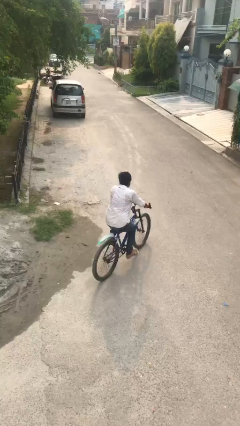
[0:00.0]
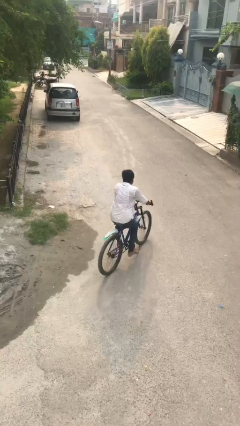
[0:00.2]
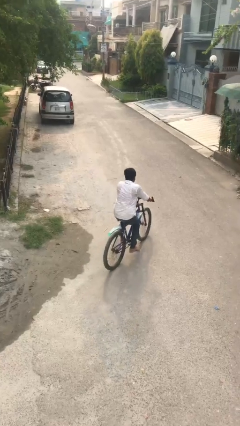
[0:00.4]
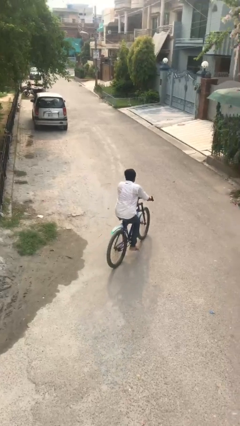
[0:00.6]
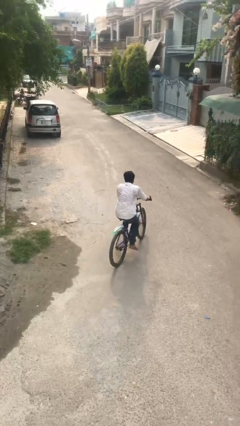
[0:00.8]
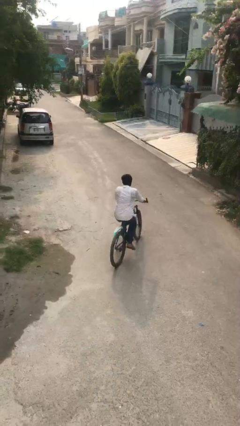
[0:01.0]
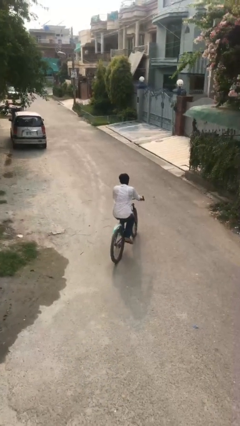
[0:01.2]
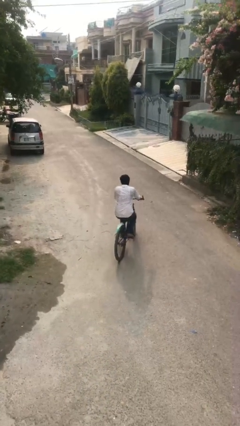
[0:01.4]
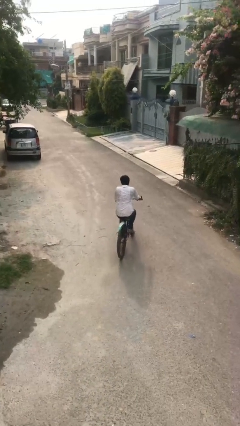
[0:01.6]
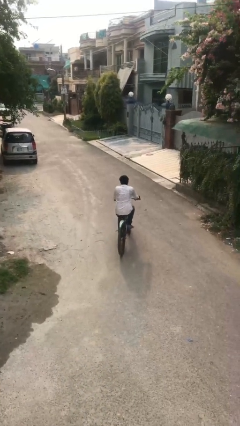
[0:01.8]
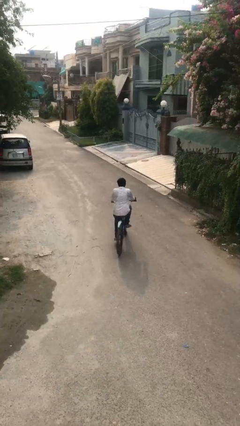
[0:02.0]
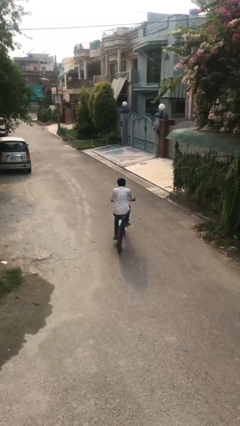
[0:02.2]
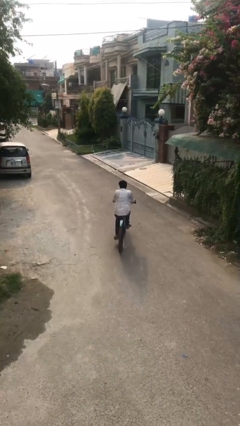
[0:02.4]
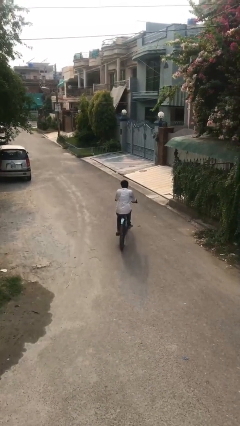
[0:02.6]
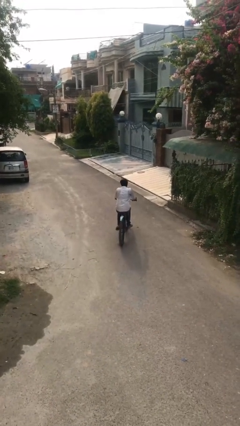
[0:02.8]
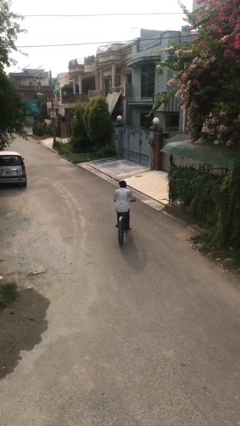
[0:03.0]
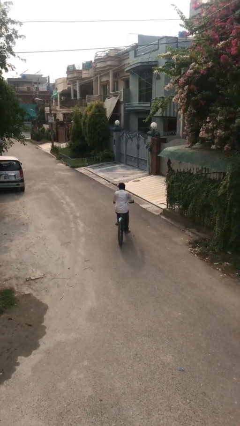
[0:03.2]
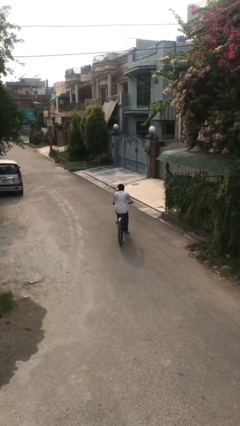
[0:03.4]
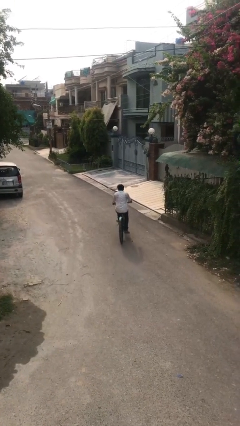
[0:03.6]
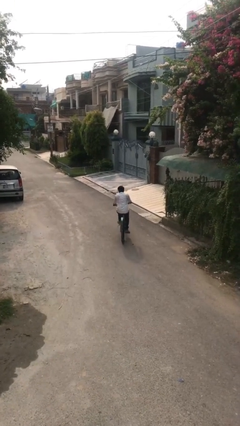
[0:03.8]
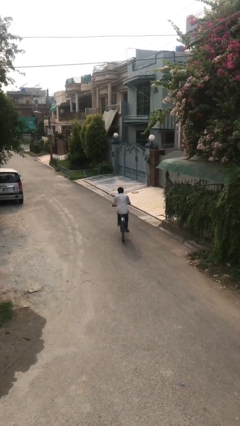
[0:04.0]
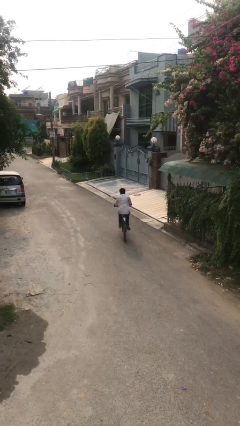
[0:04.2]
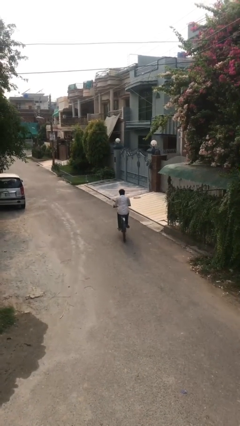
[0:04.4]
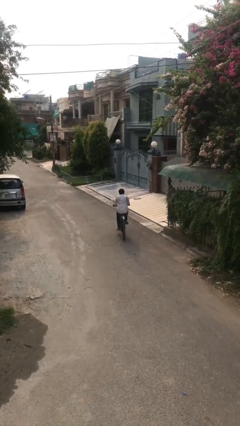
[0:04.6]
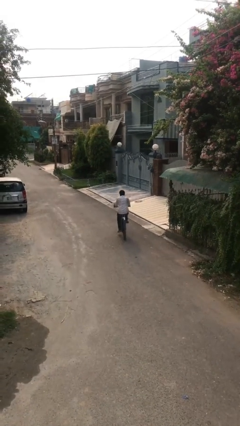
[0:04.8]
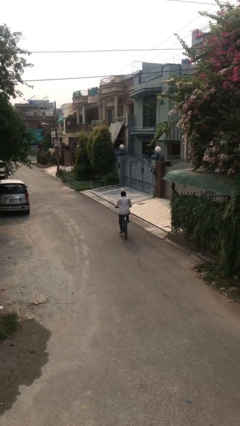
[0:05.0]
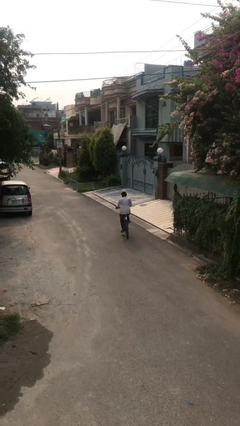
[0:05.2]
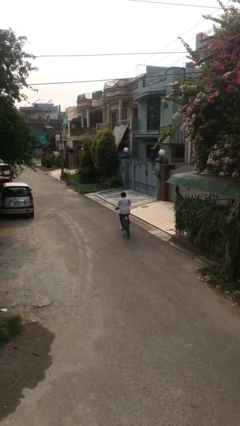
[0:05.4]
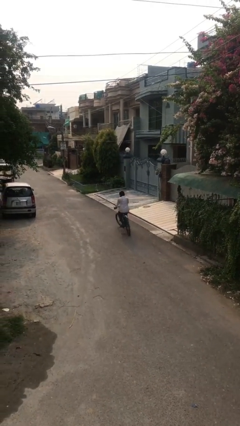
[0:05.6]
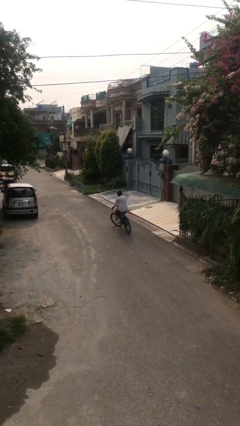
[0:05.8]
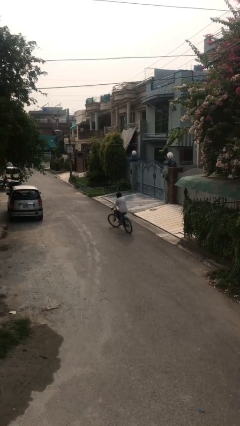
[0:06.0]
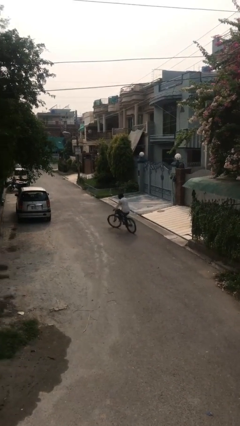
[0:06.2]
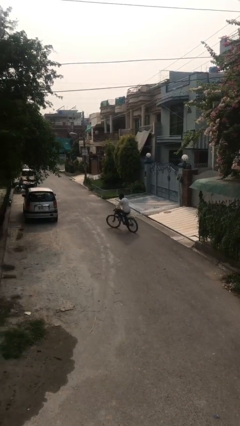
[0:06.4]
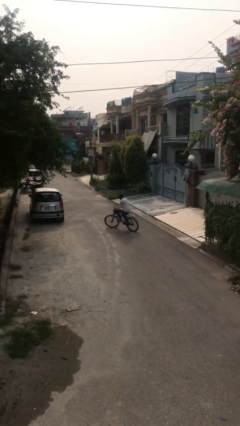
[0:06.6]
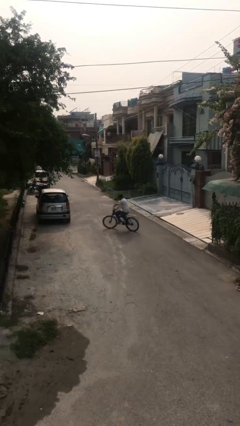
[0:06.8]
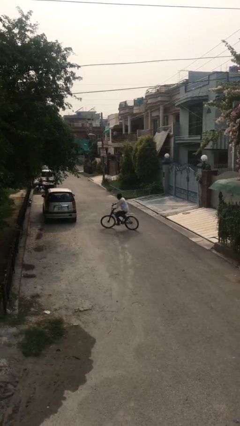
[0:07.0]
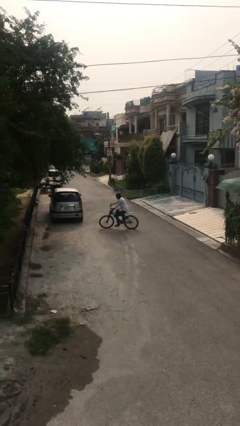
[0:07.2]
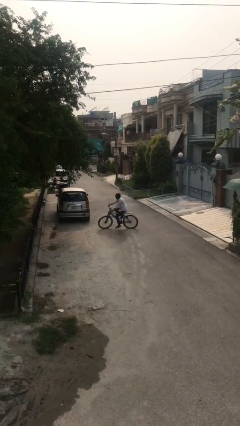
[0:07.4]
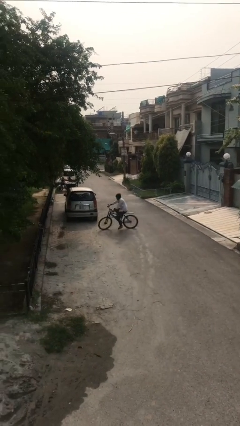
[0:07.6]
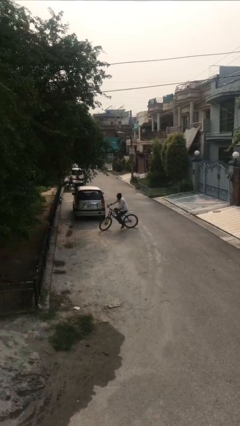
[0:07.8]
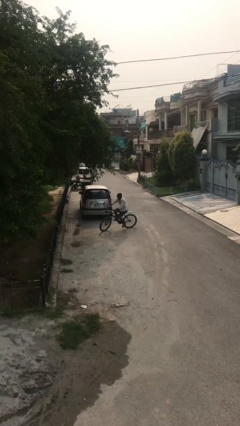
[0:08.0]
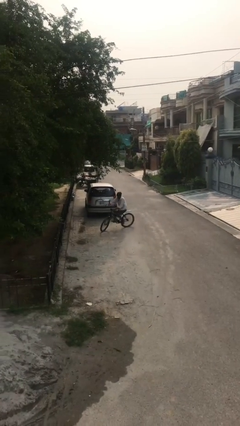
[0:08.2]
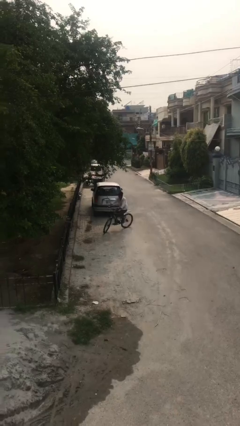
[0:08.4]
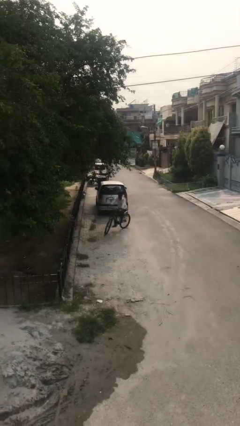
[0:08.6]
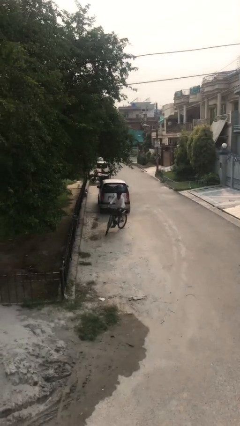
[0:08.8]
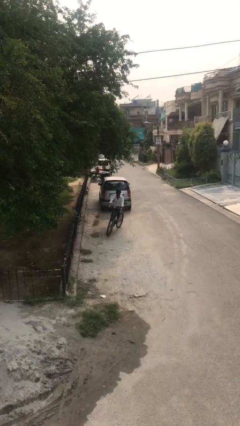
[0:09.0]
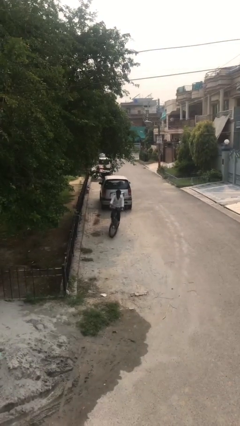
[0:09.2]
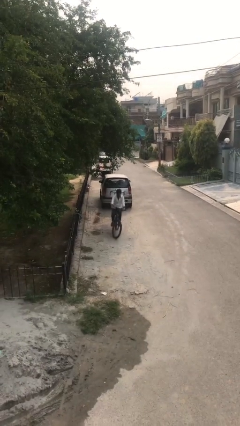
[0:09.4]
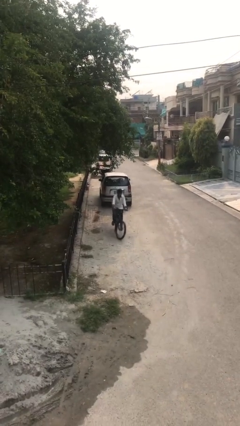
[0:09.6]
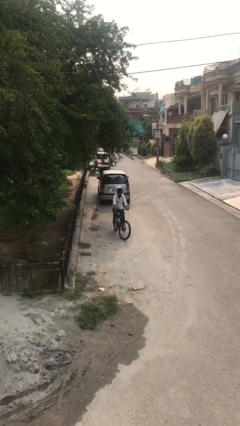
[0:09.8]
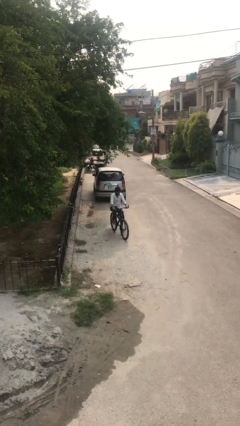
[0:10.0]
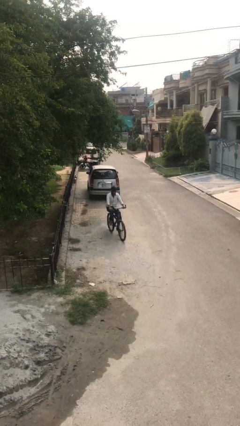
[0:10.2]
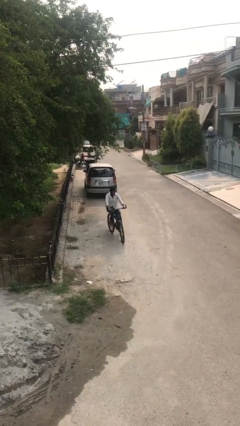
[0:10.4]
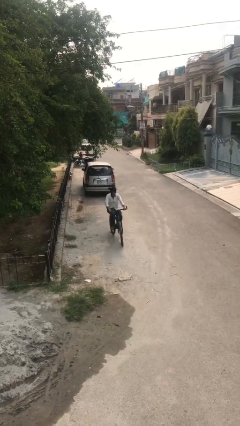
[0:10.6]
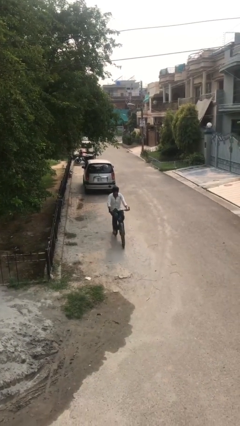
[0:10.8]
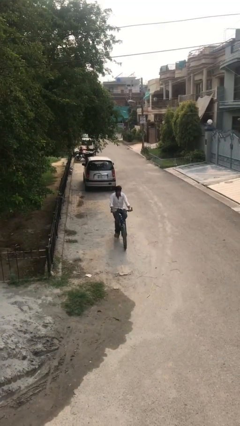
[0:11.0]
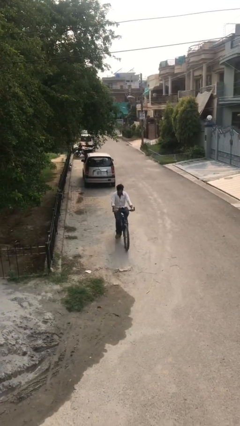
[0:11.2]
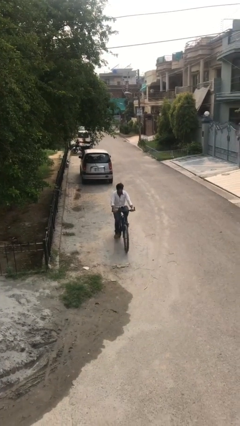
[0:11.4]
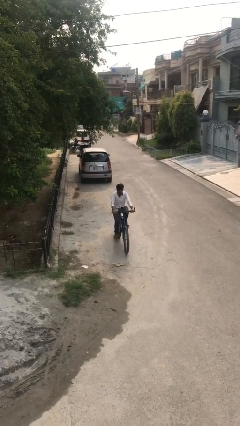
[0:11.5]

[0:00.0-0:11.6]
person rides bicycle

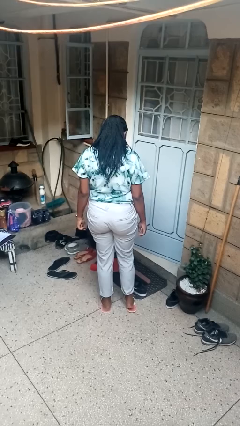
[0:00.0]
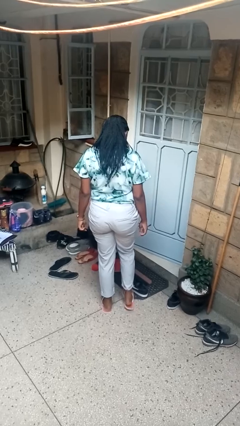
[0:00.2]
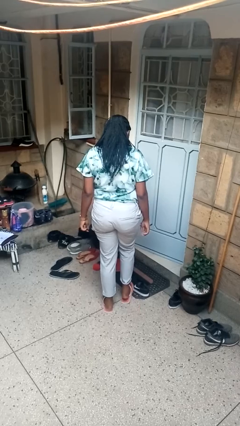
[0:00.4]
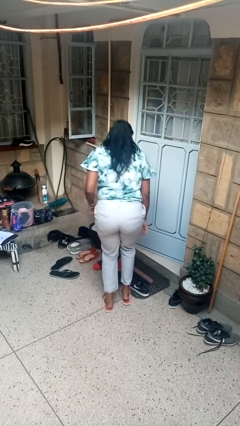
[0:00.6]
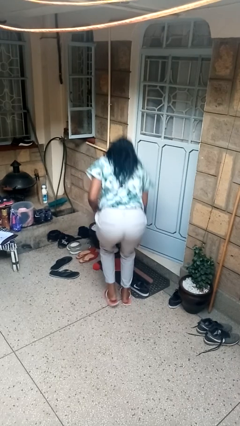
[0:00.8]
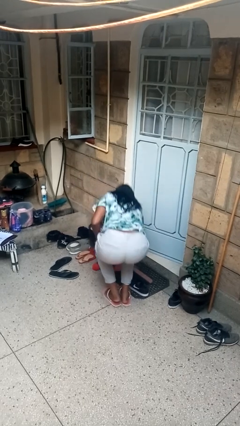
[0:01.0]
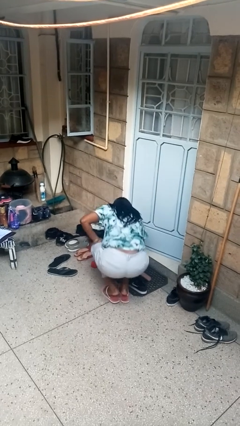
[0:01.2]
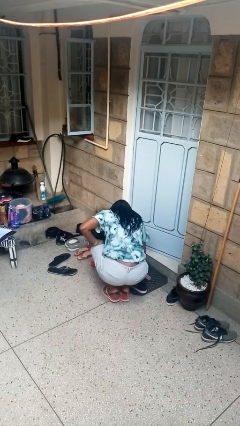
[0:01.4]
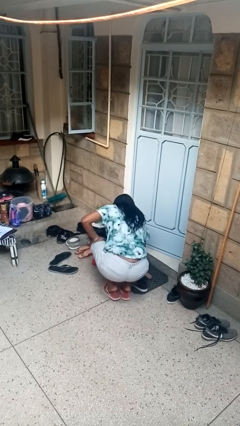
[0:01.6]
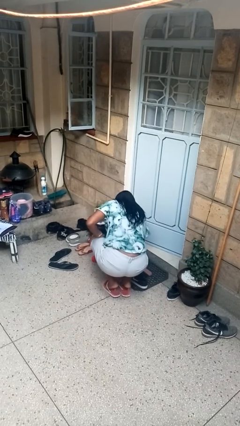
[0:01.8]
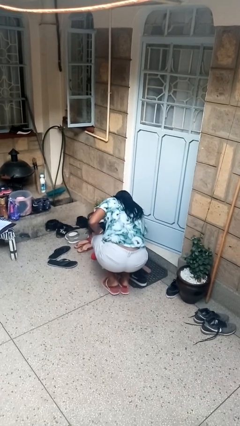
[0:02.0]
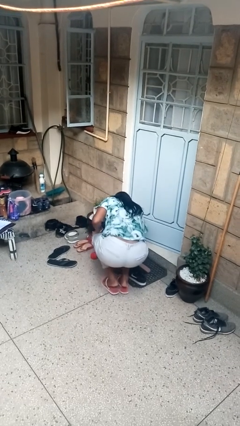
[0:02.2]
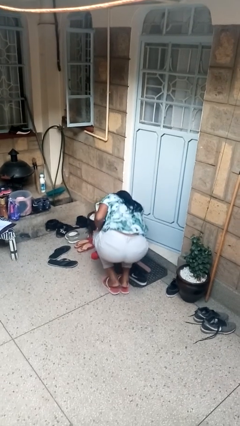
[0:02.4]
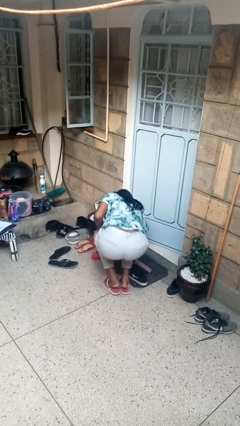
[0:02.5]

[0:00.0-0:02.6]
person trips on object on floor

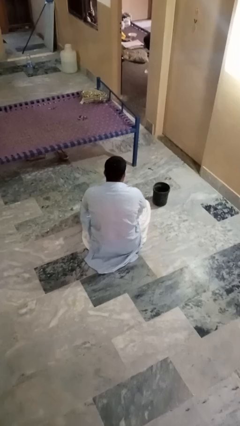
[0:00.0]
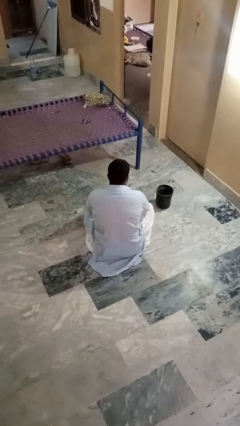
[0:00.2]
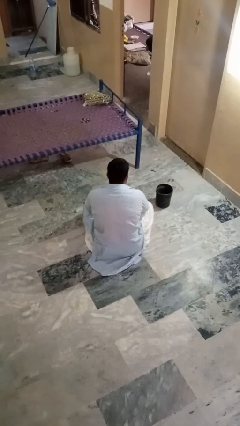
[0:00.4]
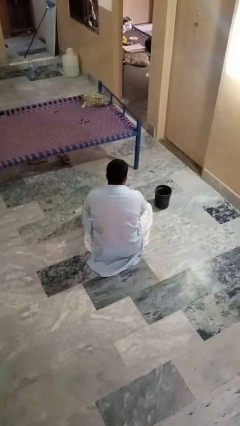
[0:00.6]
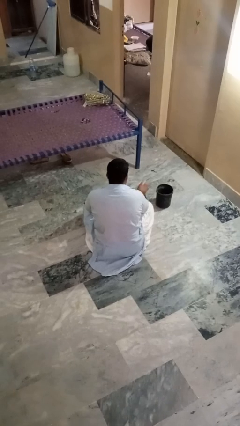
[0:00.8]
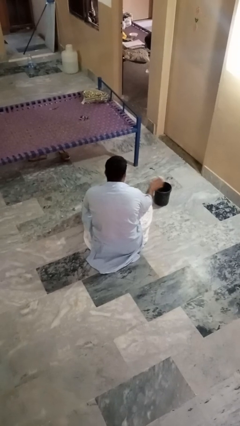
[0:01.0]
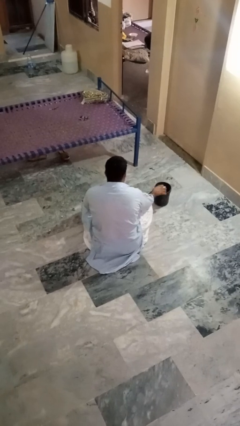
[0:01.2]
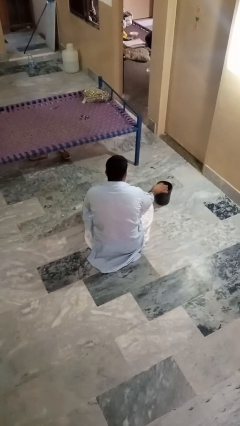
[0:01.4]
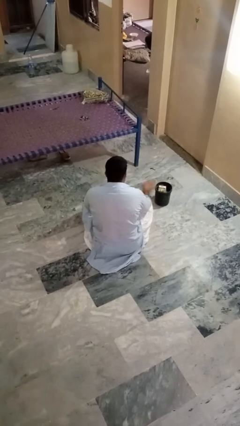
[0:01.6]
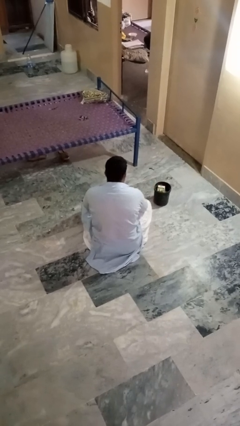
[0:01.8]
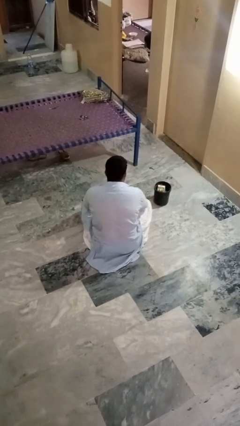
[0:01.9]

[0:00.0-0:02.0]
person puts object into basket

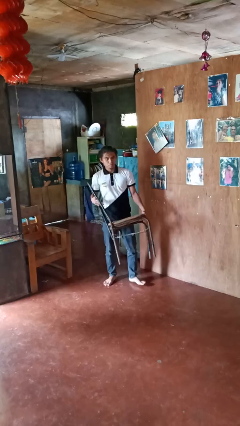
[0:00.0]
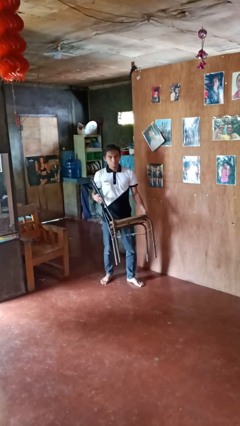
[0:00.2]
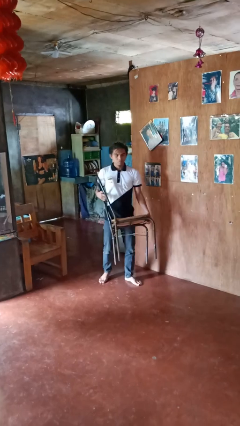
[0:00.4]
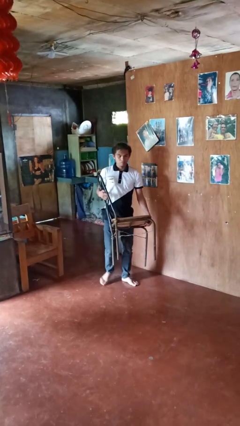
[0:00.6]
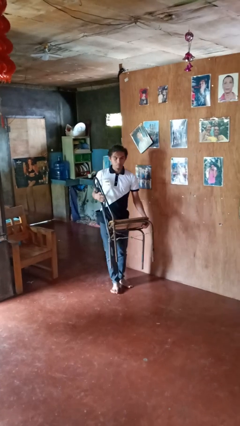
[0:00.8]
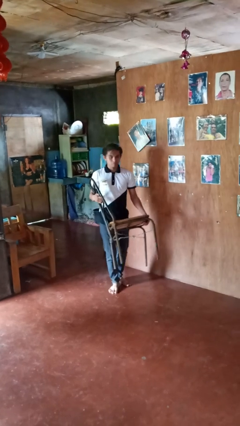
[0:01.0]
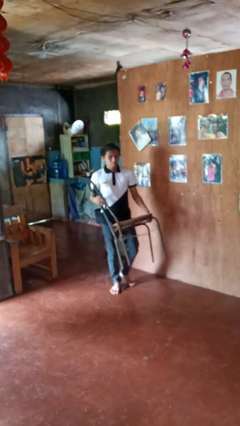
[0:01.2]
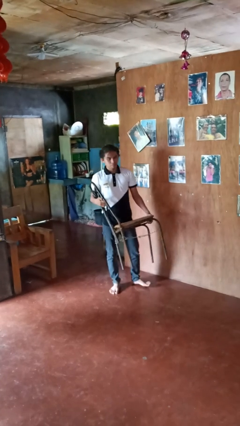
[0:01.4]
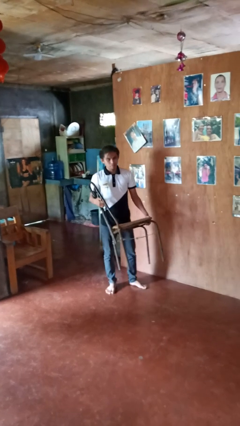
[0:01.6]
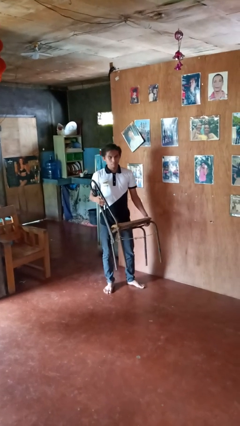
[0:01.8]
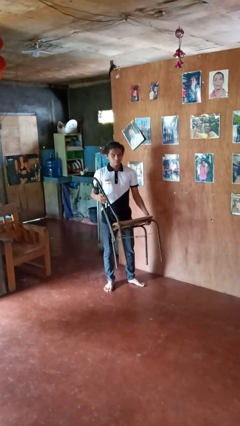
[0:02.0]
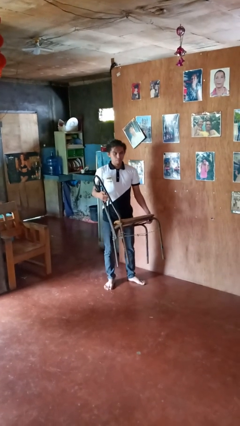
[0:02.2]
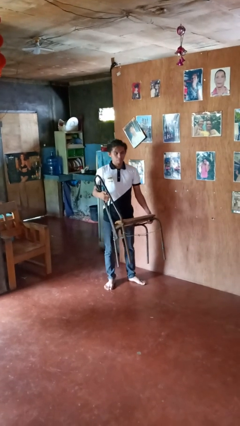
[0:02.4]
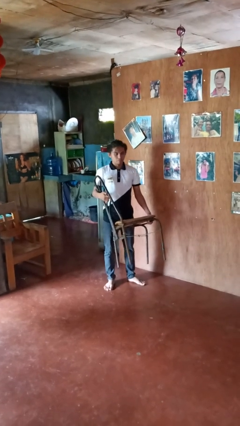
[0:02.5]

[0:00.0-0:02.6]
person carries furniture
